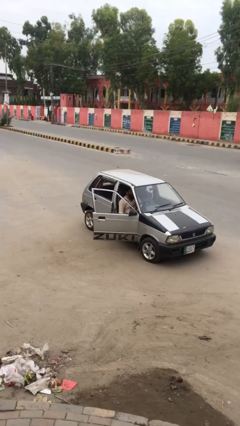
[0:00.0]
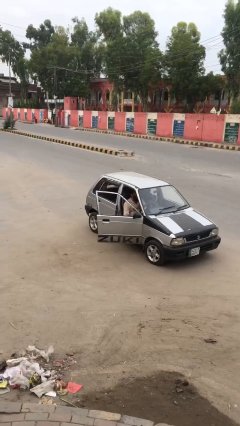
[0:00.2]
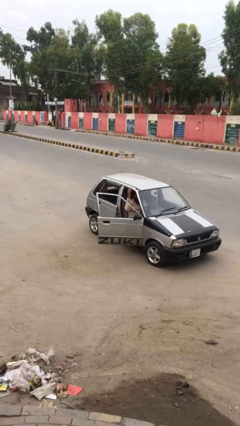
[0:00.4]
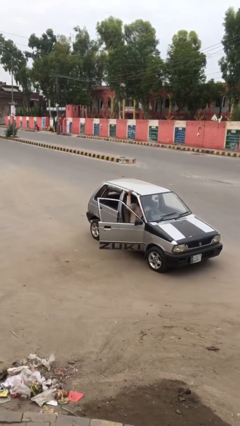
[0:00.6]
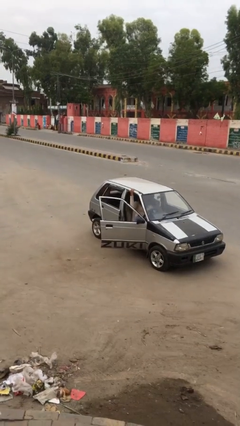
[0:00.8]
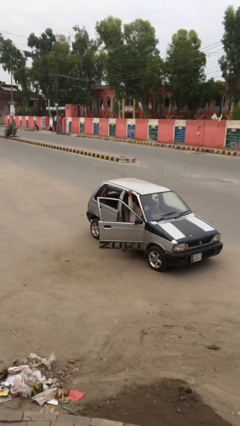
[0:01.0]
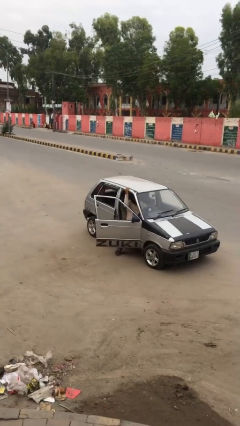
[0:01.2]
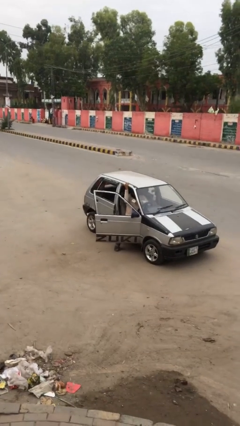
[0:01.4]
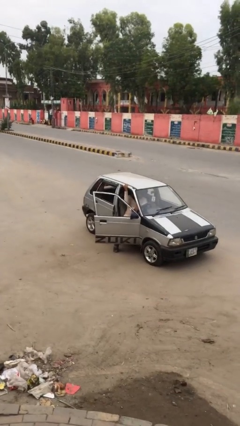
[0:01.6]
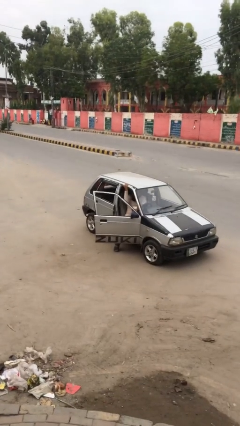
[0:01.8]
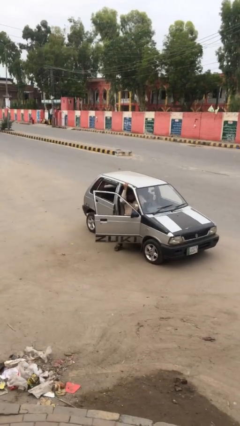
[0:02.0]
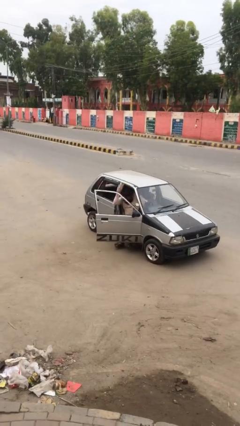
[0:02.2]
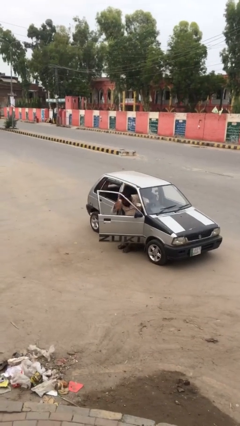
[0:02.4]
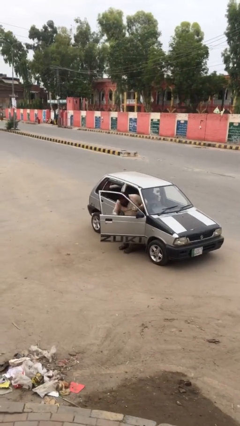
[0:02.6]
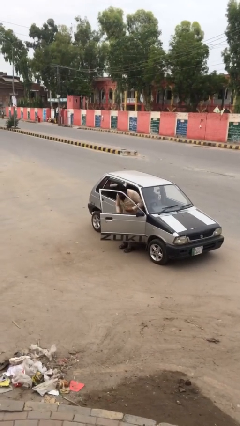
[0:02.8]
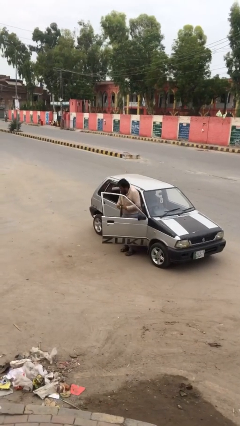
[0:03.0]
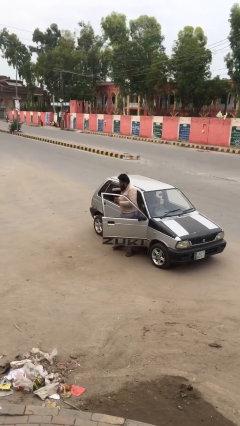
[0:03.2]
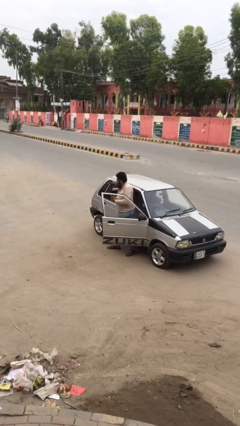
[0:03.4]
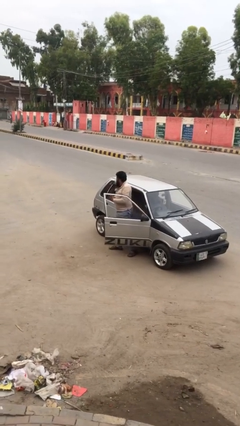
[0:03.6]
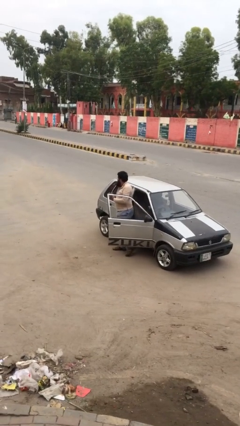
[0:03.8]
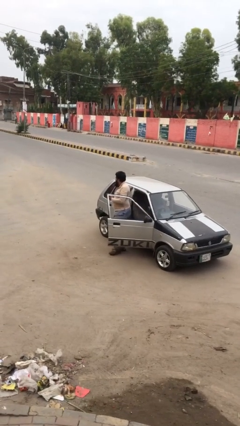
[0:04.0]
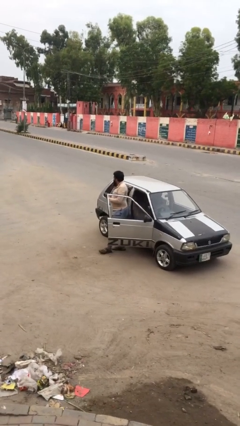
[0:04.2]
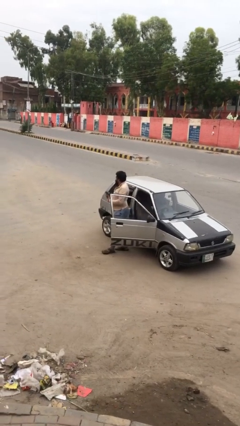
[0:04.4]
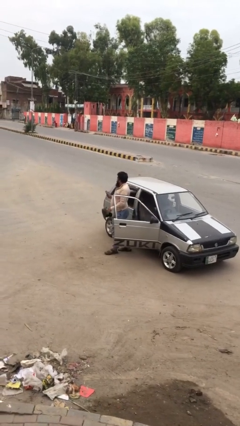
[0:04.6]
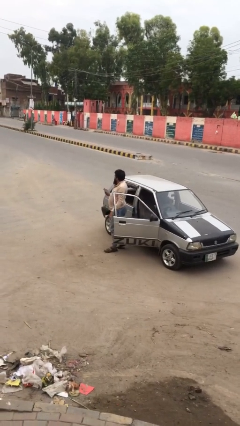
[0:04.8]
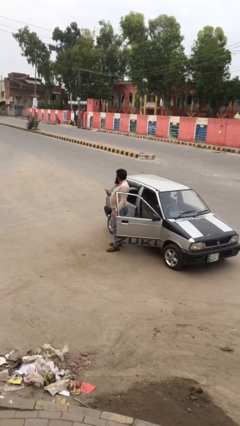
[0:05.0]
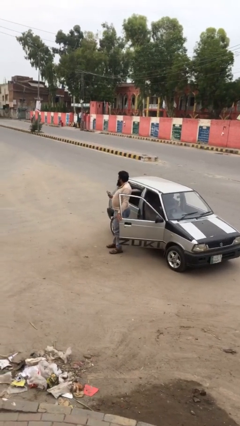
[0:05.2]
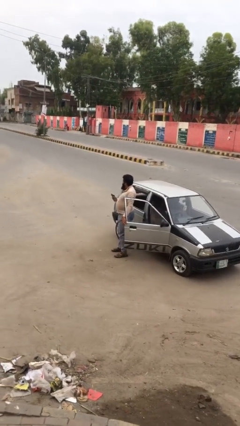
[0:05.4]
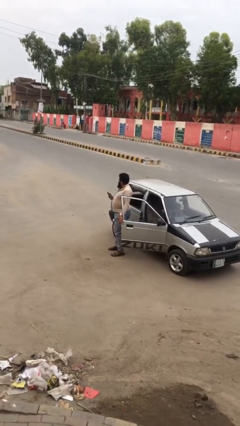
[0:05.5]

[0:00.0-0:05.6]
person exits car

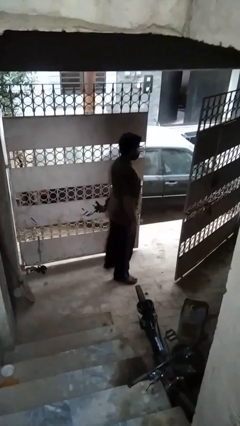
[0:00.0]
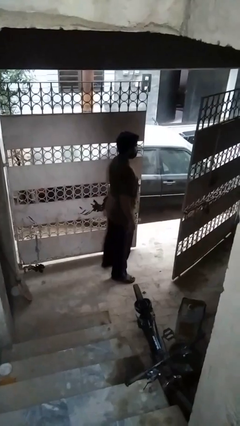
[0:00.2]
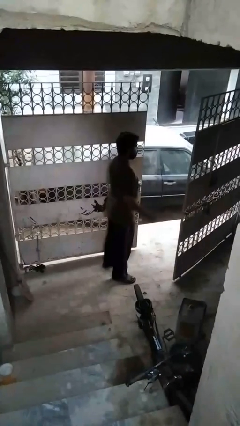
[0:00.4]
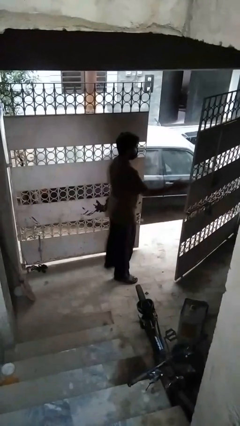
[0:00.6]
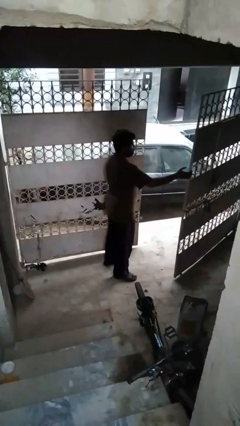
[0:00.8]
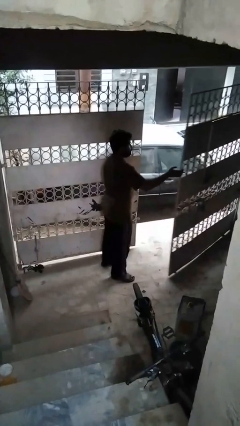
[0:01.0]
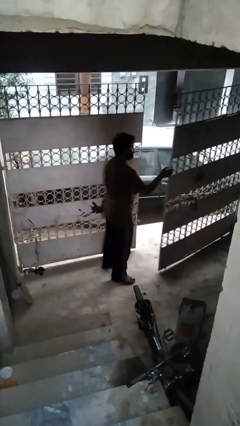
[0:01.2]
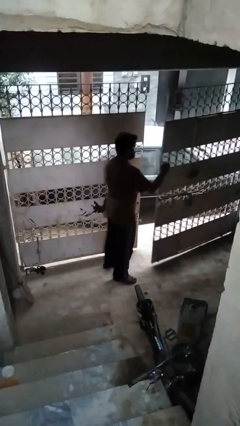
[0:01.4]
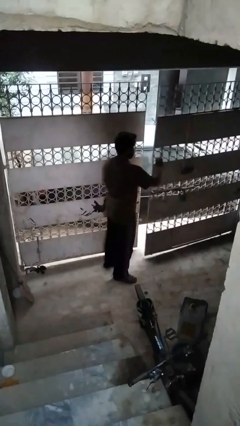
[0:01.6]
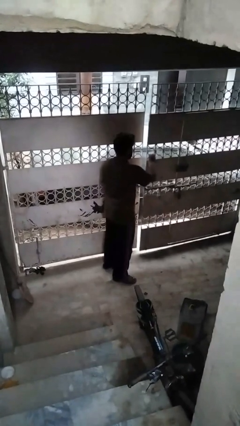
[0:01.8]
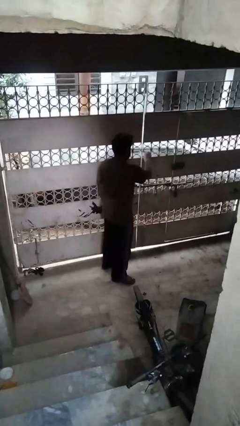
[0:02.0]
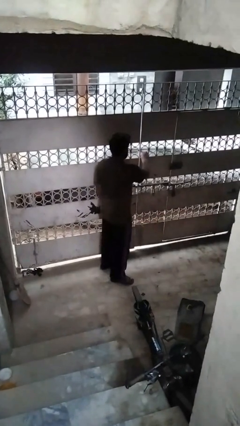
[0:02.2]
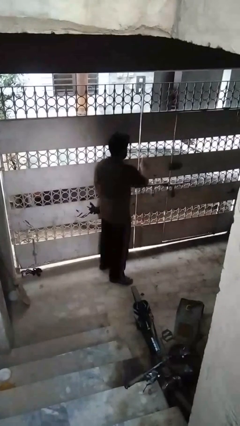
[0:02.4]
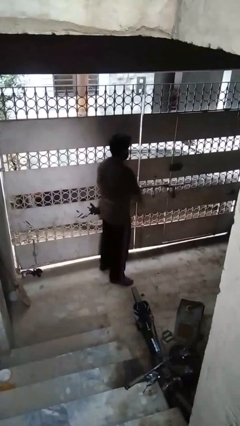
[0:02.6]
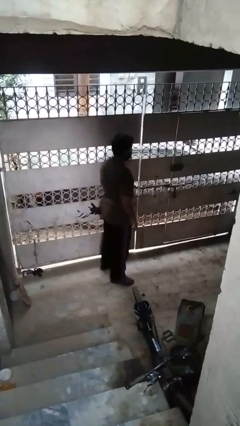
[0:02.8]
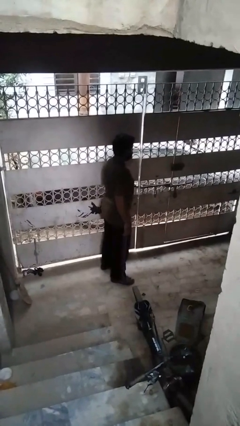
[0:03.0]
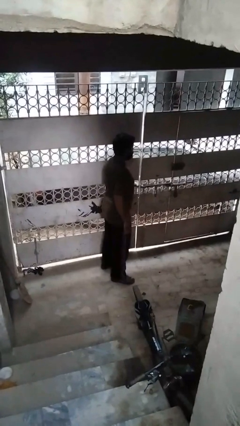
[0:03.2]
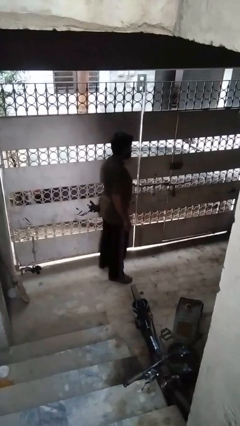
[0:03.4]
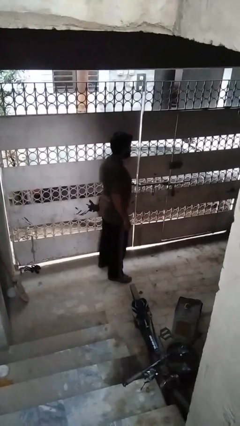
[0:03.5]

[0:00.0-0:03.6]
person closes gate

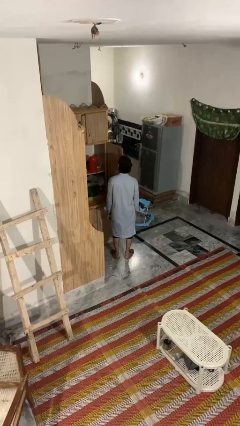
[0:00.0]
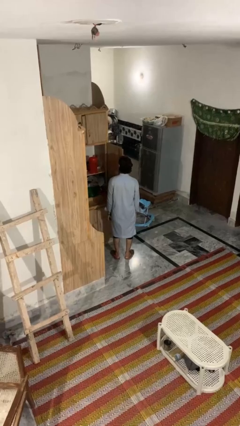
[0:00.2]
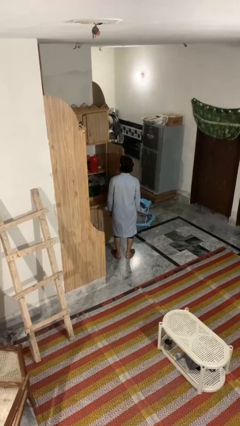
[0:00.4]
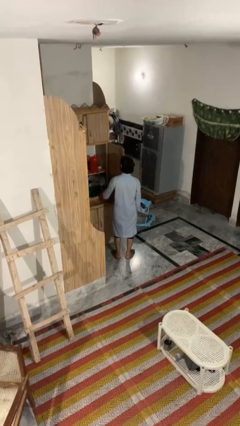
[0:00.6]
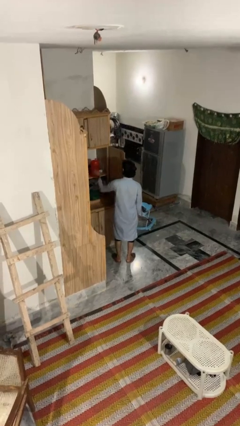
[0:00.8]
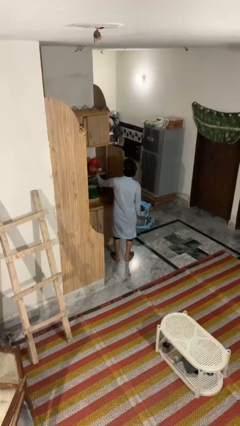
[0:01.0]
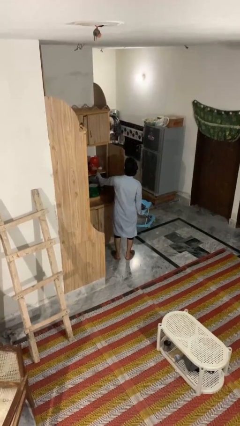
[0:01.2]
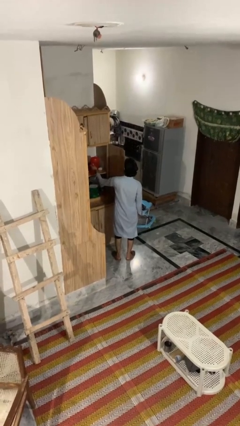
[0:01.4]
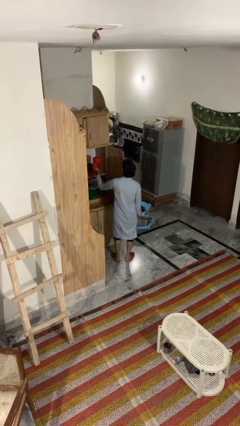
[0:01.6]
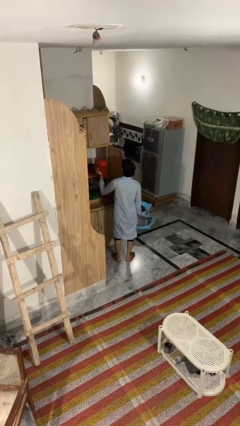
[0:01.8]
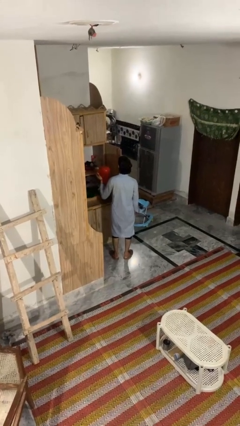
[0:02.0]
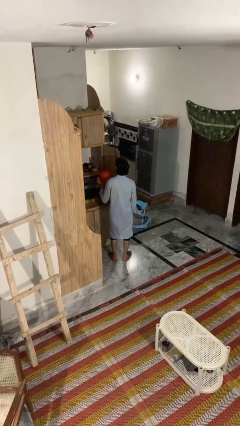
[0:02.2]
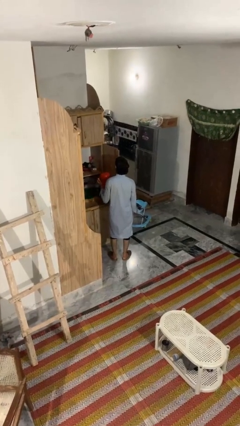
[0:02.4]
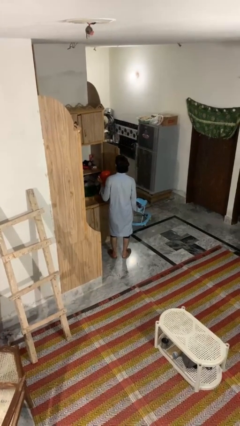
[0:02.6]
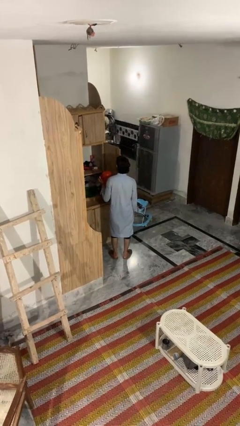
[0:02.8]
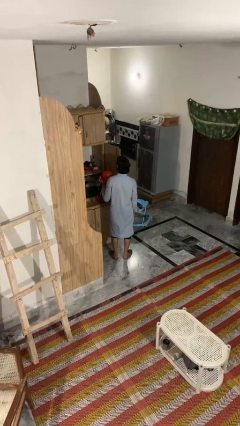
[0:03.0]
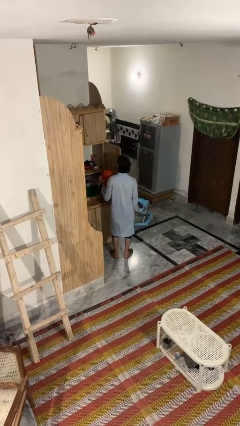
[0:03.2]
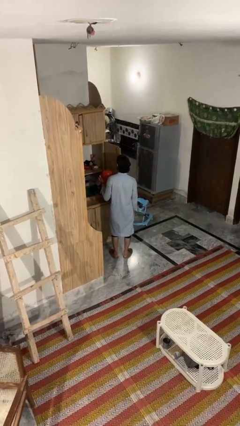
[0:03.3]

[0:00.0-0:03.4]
person picks up object from cabinet

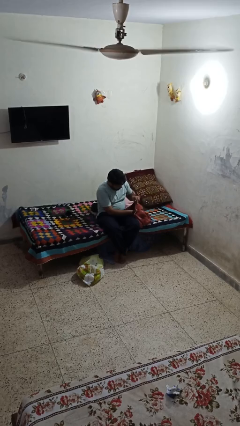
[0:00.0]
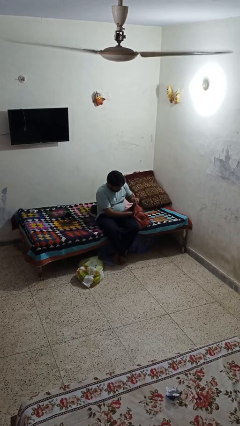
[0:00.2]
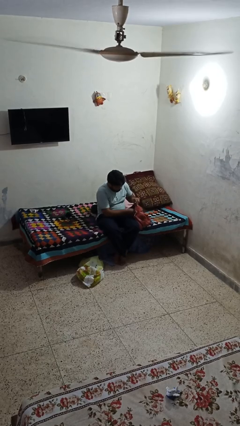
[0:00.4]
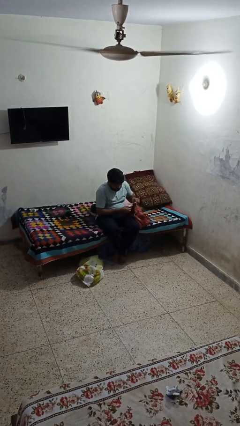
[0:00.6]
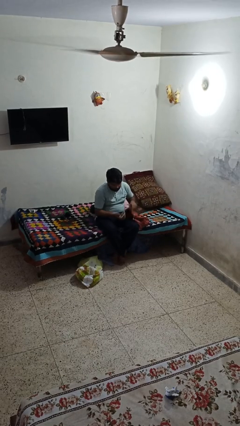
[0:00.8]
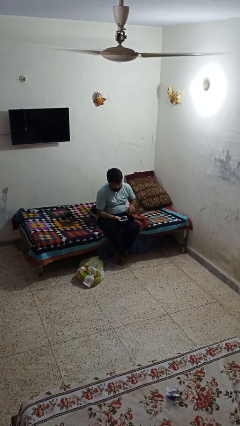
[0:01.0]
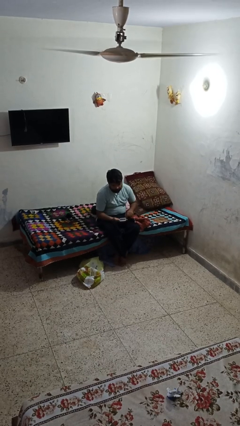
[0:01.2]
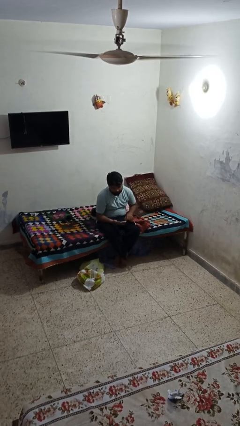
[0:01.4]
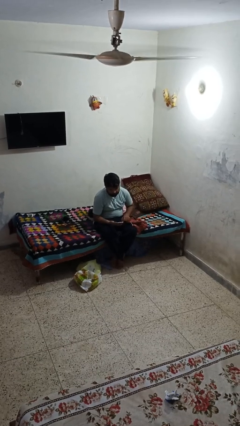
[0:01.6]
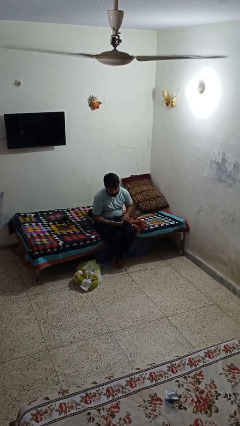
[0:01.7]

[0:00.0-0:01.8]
person takes object from purse

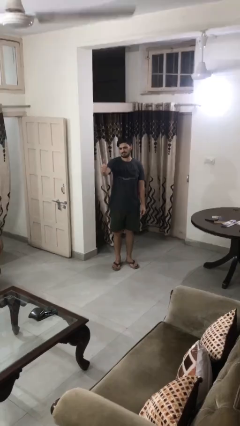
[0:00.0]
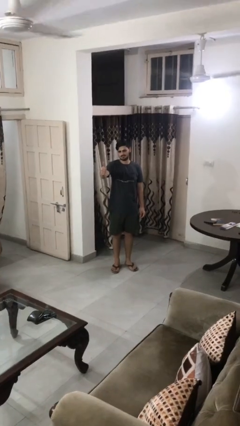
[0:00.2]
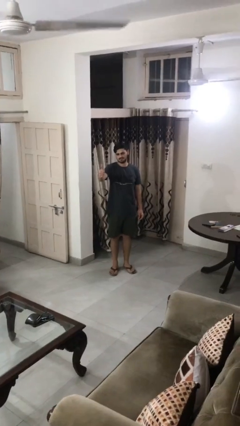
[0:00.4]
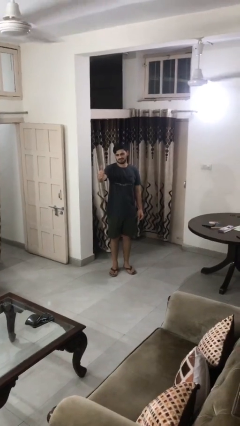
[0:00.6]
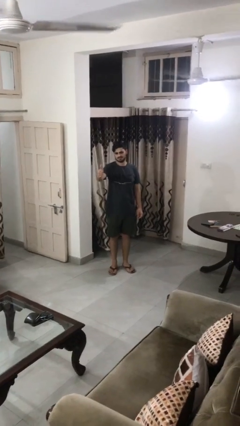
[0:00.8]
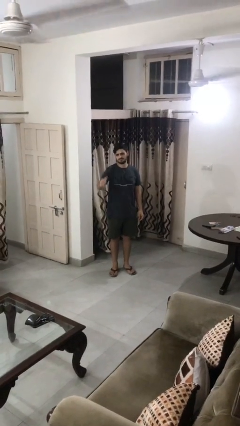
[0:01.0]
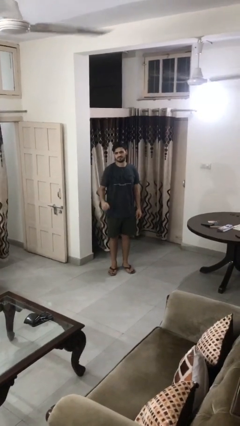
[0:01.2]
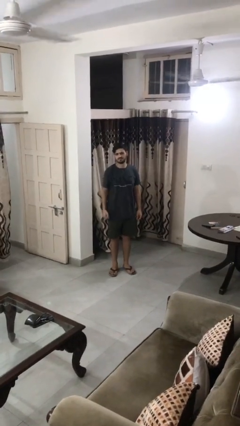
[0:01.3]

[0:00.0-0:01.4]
person gestures thumbs up

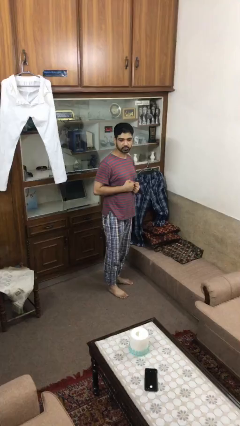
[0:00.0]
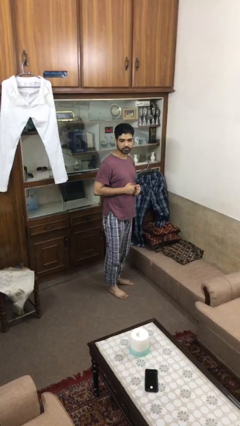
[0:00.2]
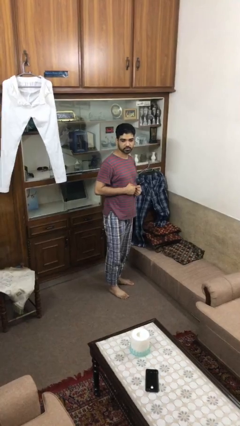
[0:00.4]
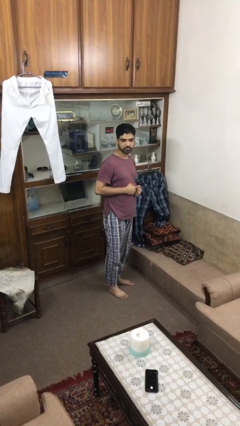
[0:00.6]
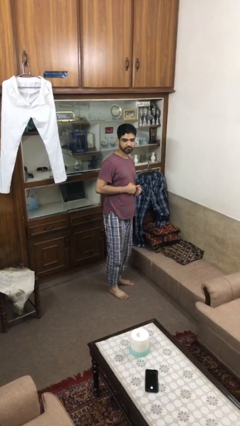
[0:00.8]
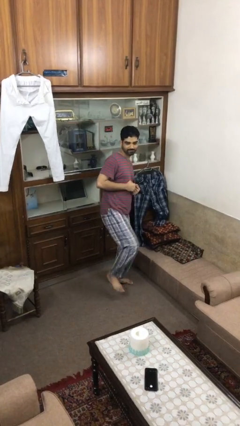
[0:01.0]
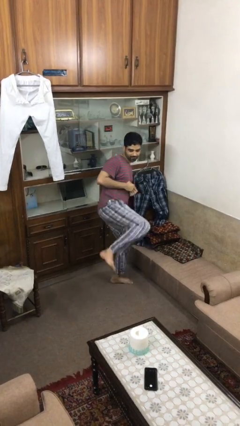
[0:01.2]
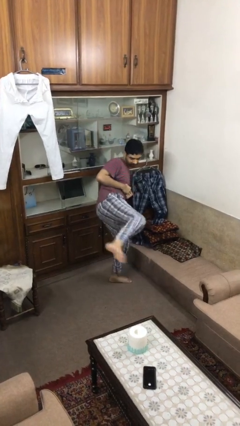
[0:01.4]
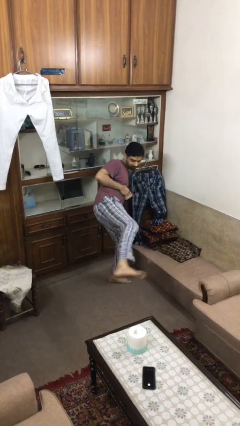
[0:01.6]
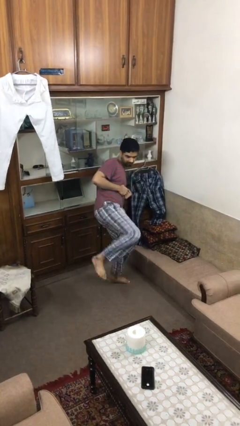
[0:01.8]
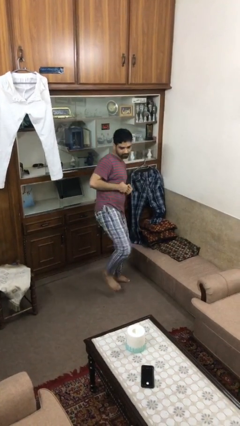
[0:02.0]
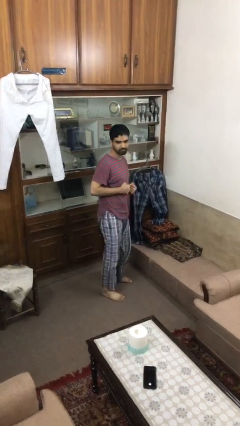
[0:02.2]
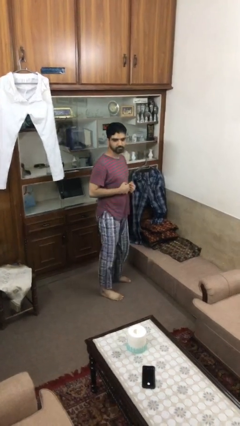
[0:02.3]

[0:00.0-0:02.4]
person karate kicks
